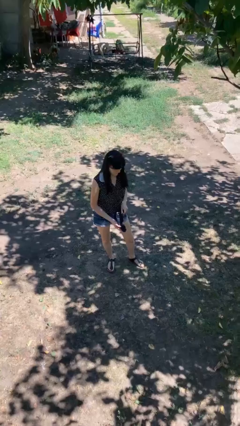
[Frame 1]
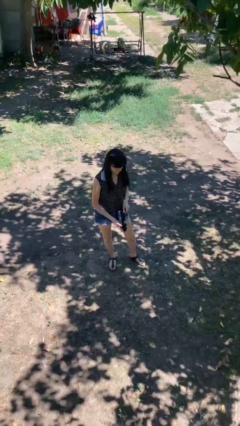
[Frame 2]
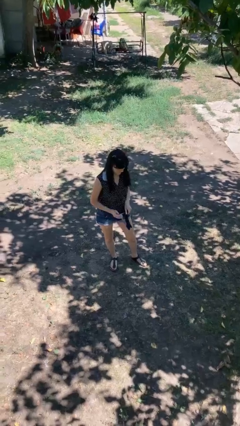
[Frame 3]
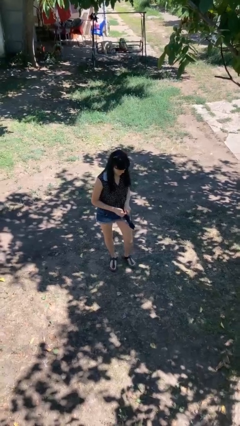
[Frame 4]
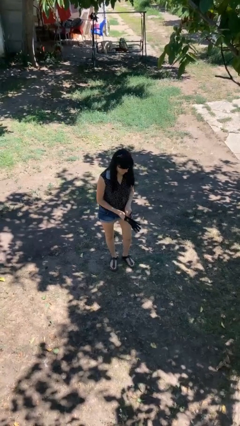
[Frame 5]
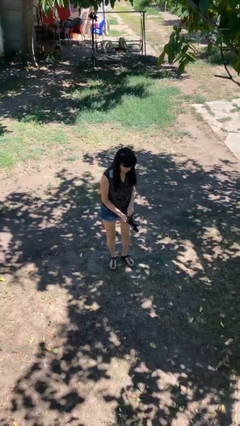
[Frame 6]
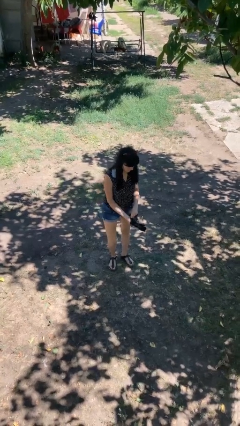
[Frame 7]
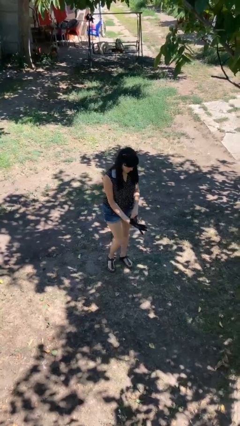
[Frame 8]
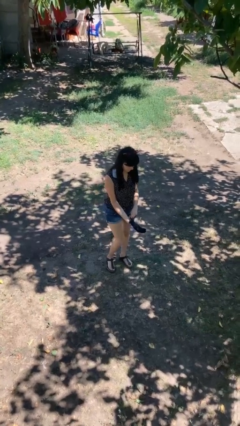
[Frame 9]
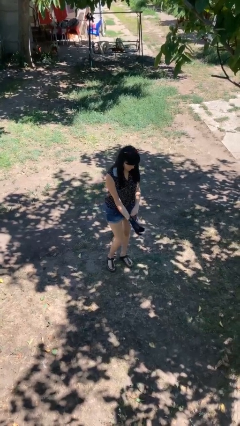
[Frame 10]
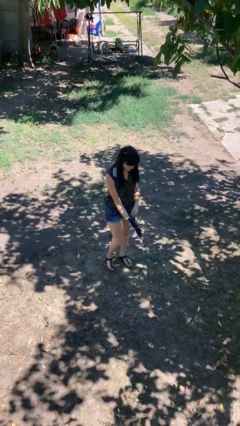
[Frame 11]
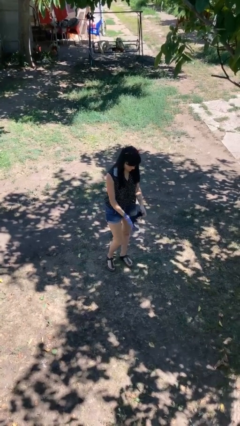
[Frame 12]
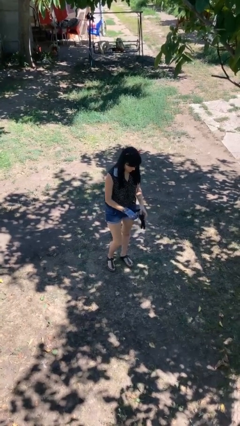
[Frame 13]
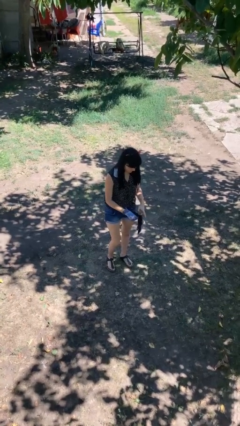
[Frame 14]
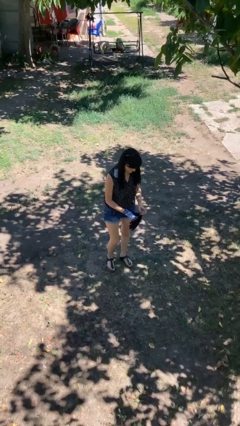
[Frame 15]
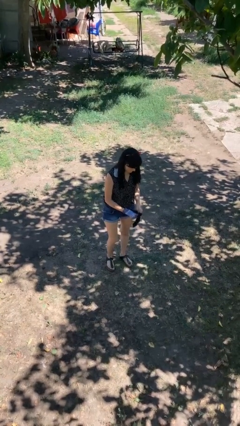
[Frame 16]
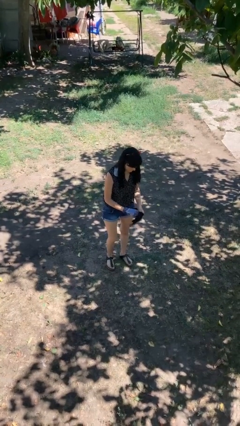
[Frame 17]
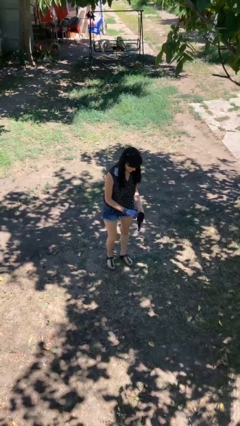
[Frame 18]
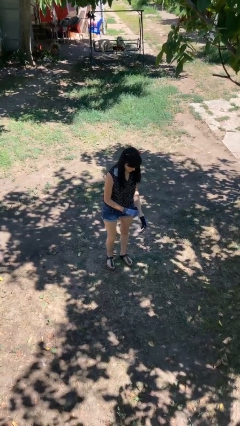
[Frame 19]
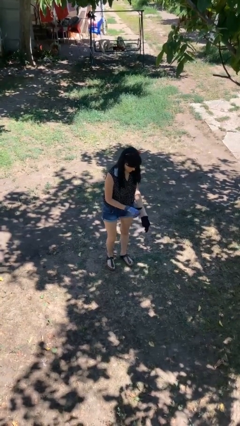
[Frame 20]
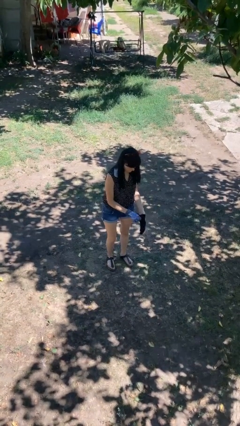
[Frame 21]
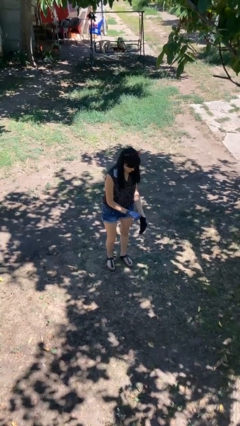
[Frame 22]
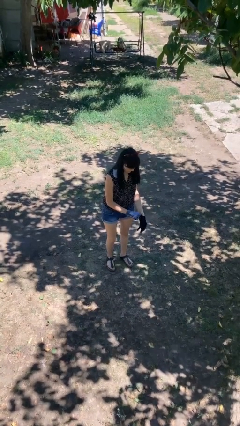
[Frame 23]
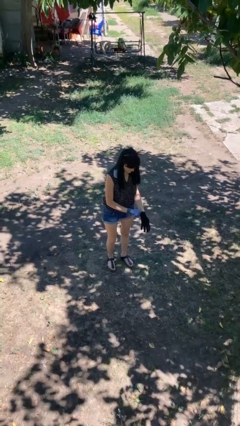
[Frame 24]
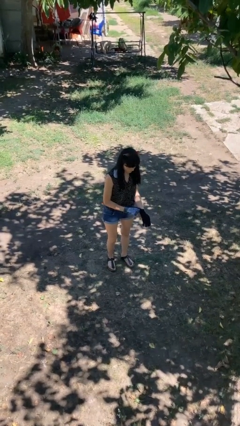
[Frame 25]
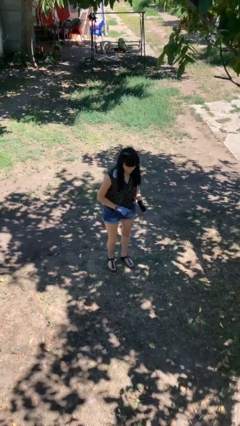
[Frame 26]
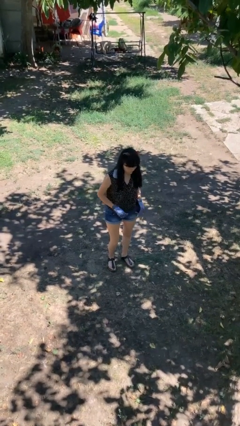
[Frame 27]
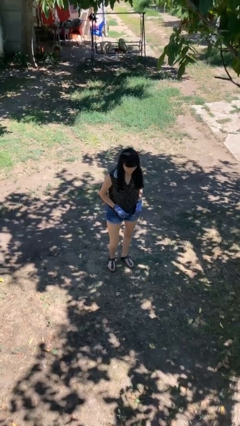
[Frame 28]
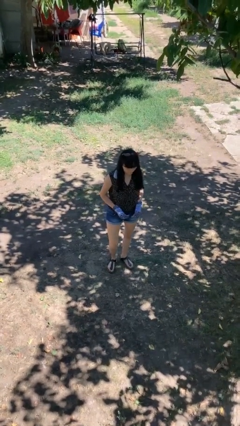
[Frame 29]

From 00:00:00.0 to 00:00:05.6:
person puts on gloves

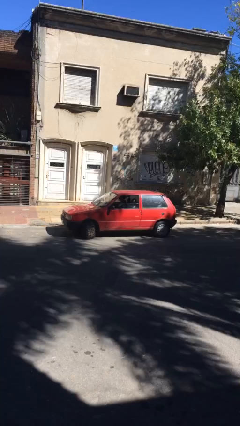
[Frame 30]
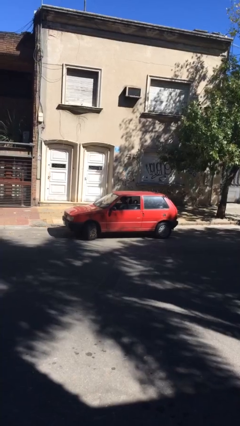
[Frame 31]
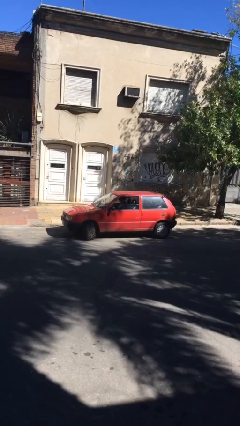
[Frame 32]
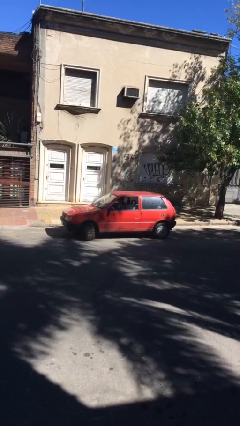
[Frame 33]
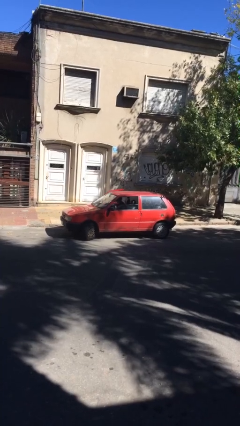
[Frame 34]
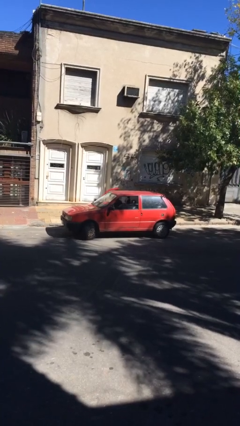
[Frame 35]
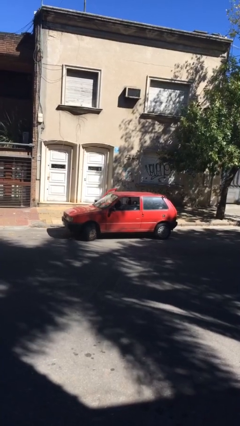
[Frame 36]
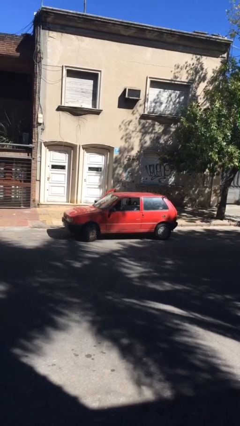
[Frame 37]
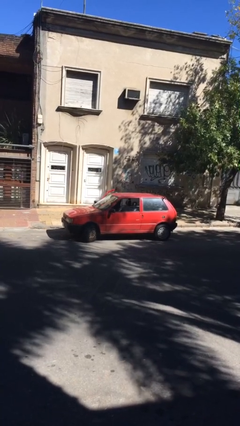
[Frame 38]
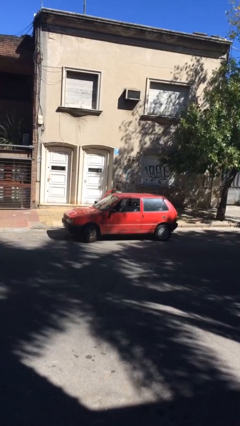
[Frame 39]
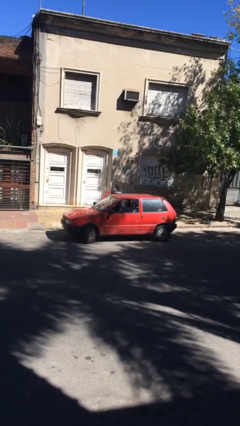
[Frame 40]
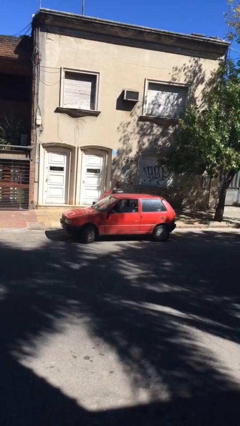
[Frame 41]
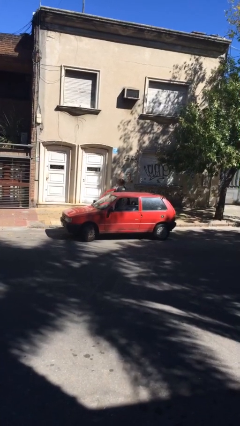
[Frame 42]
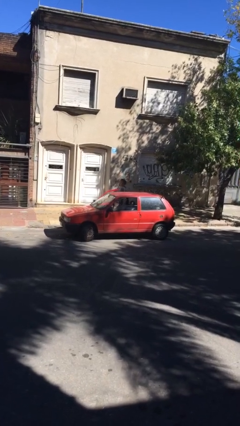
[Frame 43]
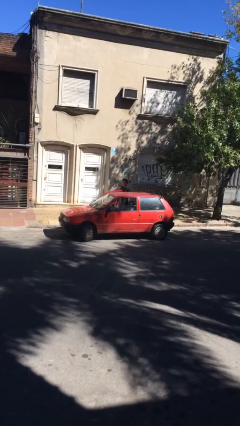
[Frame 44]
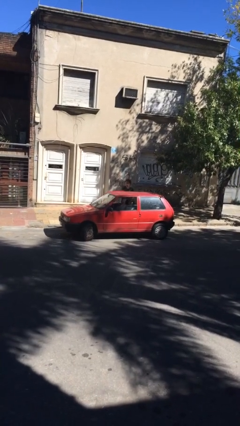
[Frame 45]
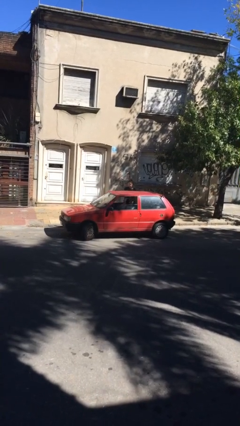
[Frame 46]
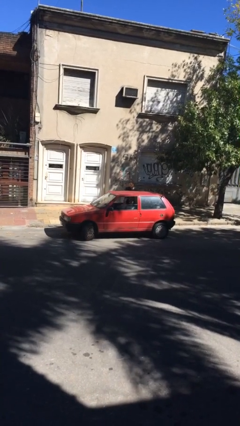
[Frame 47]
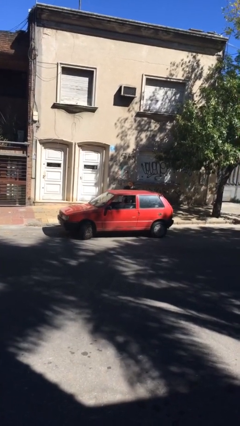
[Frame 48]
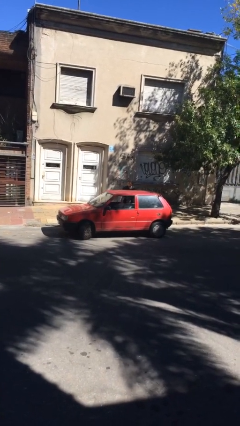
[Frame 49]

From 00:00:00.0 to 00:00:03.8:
car drops off person

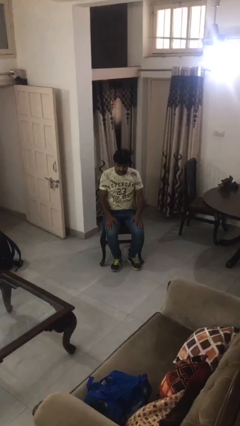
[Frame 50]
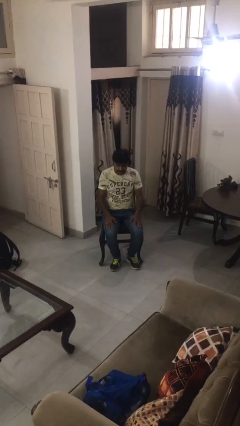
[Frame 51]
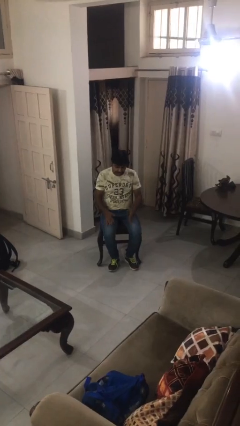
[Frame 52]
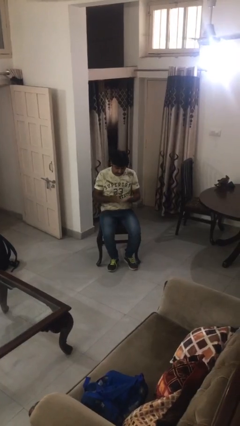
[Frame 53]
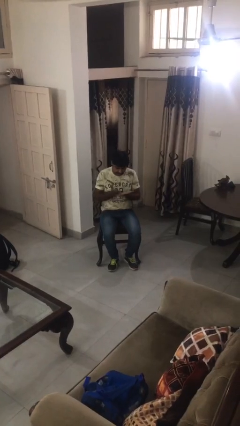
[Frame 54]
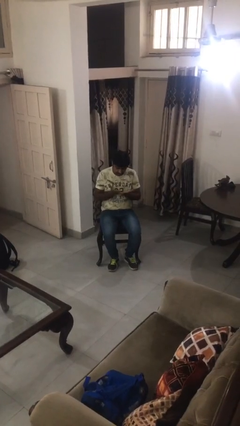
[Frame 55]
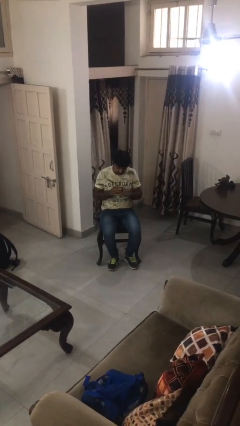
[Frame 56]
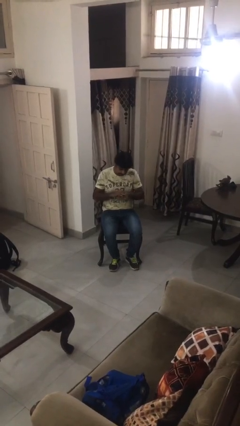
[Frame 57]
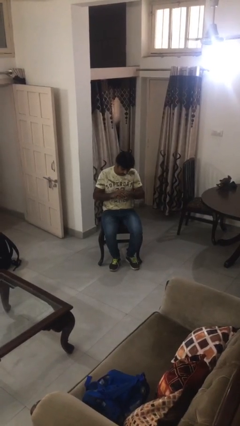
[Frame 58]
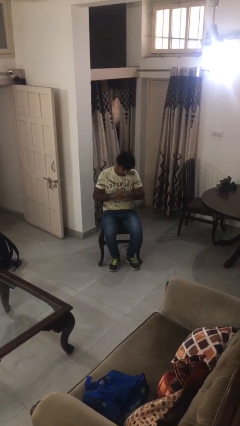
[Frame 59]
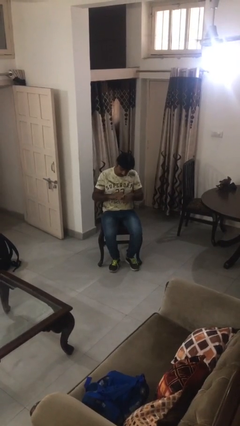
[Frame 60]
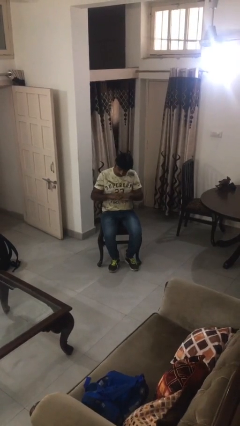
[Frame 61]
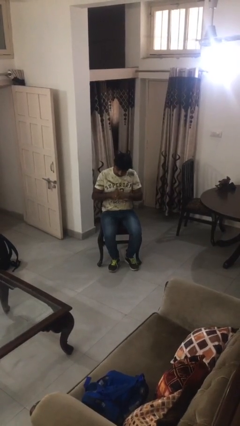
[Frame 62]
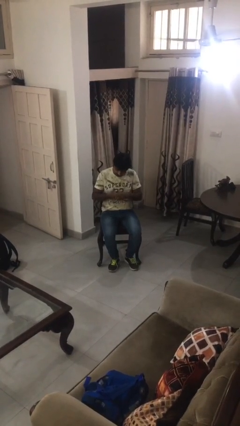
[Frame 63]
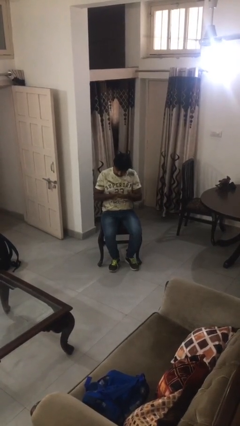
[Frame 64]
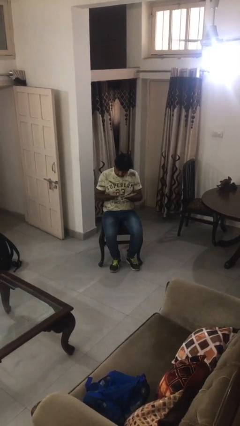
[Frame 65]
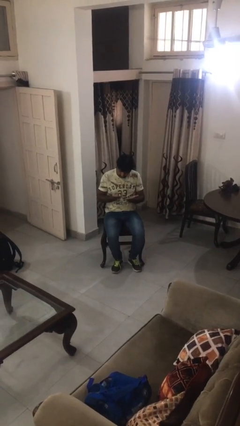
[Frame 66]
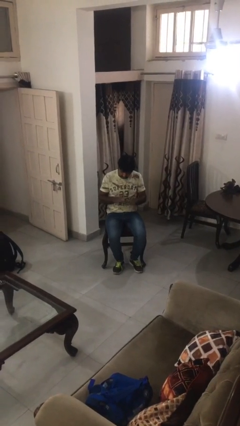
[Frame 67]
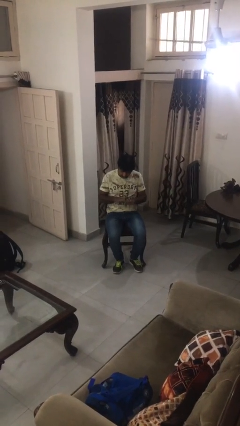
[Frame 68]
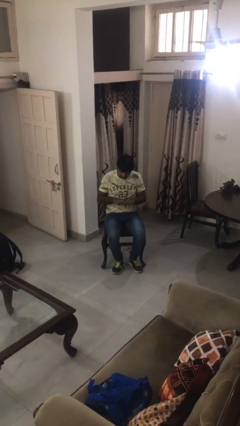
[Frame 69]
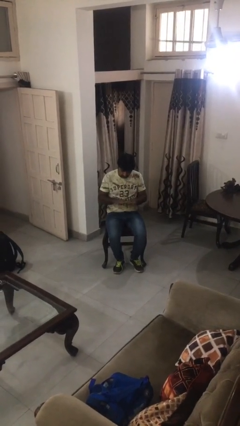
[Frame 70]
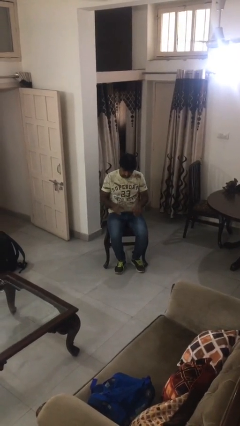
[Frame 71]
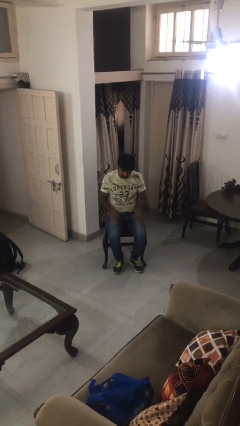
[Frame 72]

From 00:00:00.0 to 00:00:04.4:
person looks at hands in lap

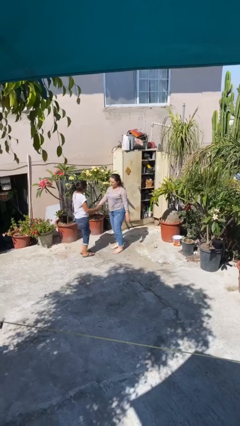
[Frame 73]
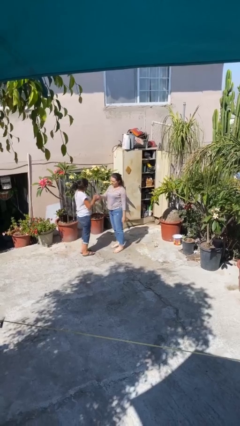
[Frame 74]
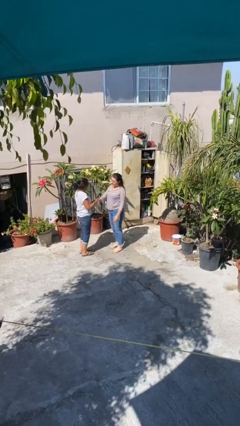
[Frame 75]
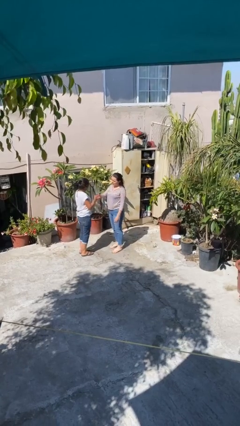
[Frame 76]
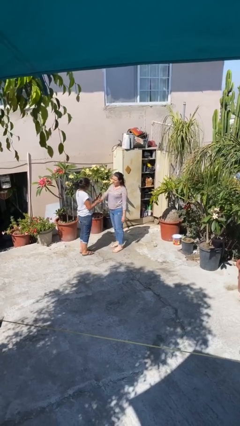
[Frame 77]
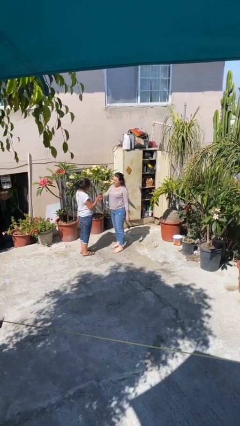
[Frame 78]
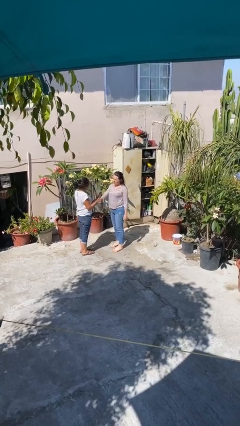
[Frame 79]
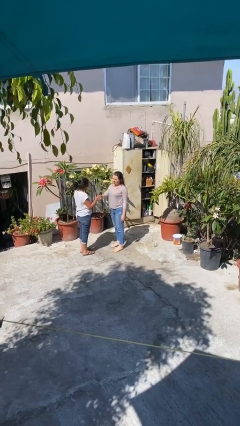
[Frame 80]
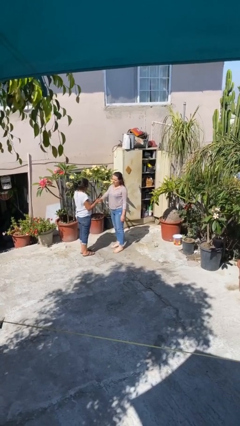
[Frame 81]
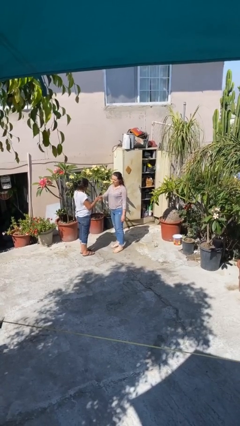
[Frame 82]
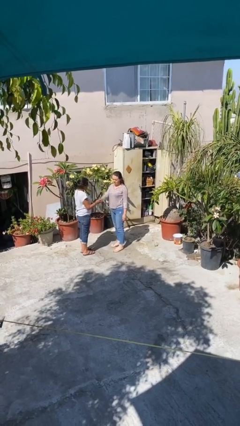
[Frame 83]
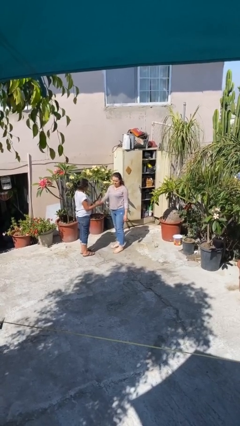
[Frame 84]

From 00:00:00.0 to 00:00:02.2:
person shakes hand

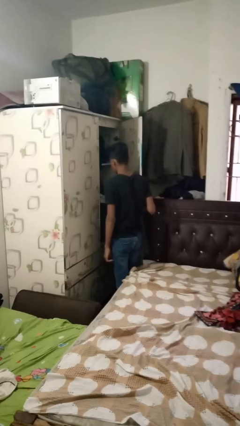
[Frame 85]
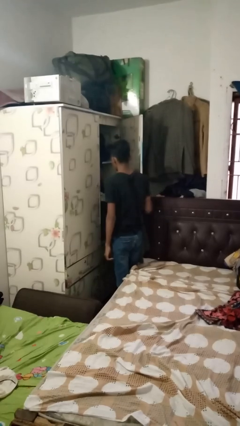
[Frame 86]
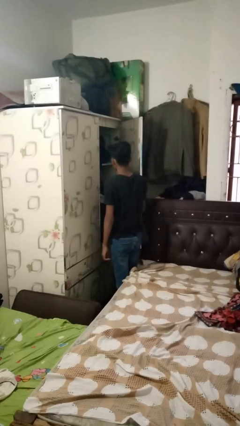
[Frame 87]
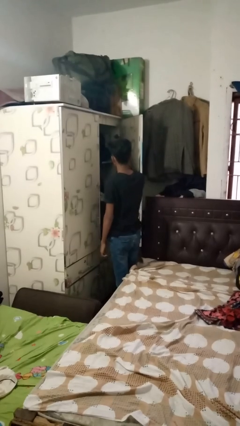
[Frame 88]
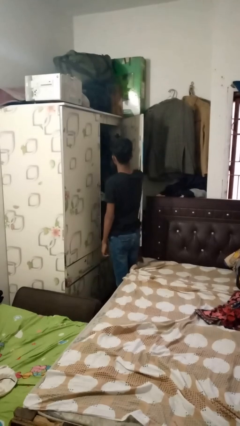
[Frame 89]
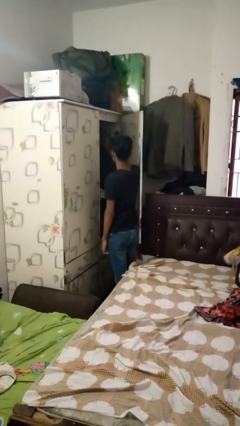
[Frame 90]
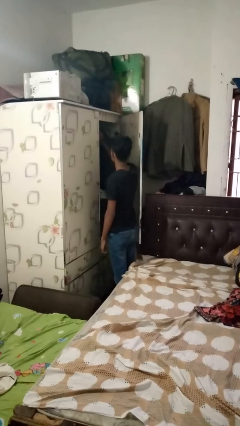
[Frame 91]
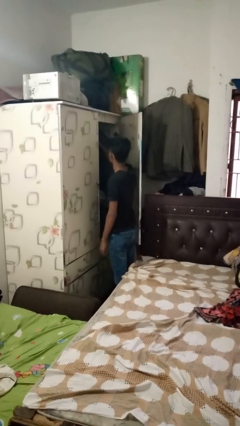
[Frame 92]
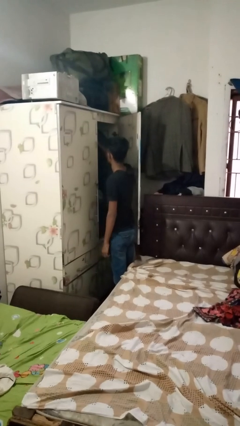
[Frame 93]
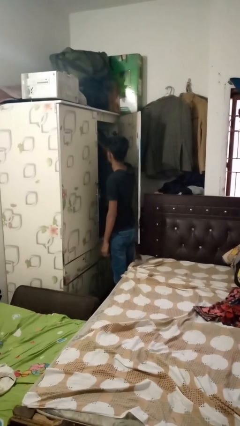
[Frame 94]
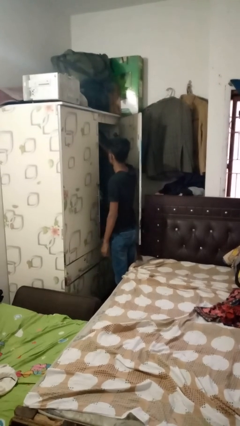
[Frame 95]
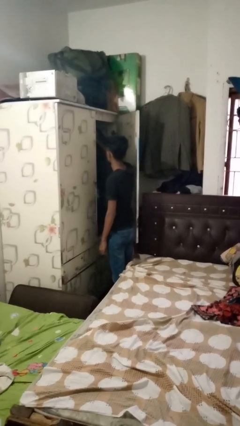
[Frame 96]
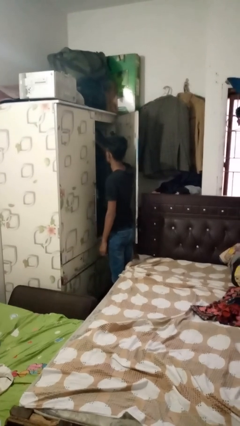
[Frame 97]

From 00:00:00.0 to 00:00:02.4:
person puts clothes into closet
